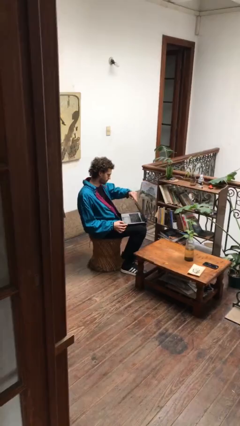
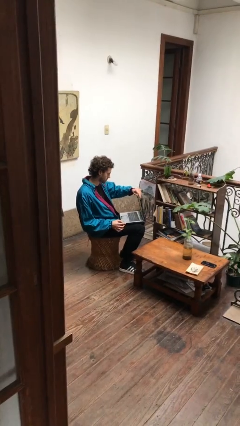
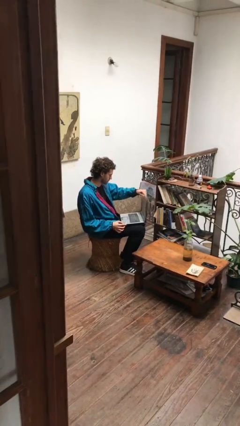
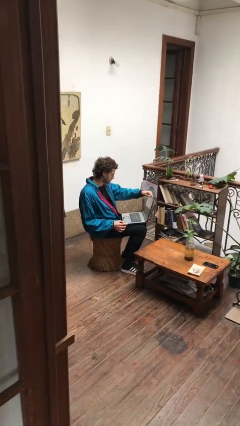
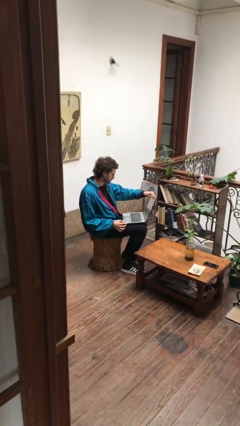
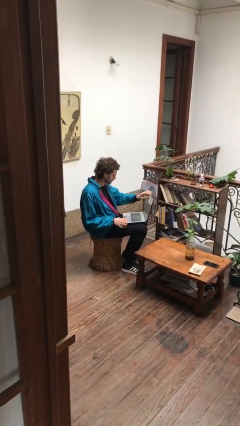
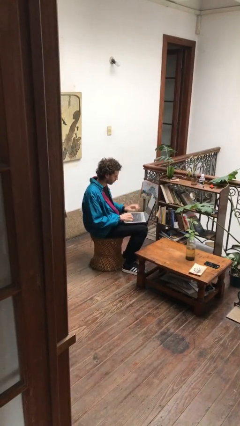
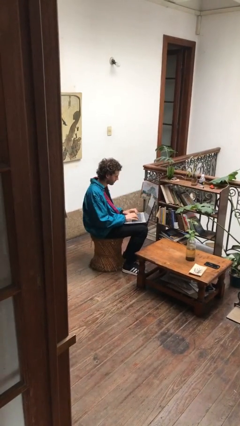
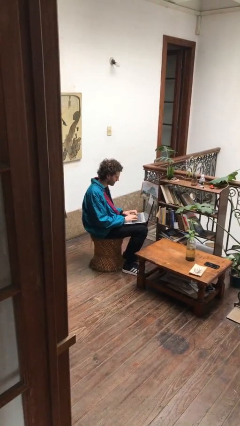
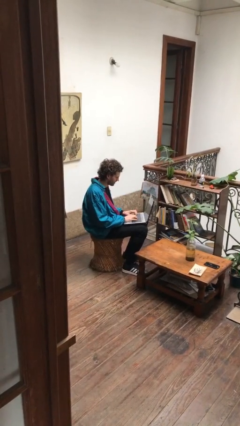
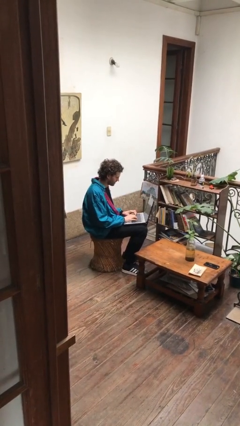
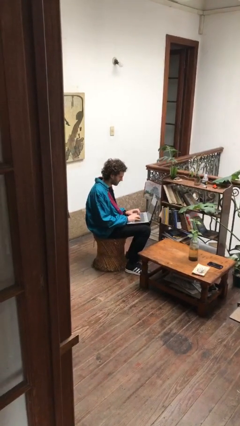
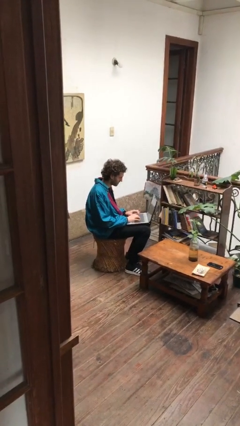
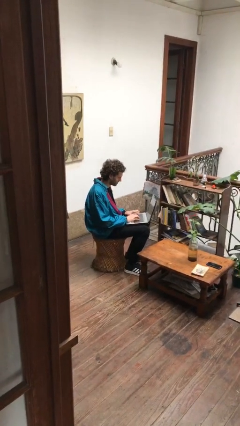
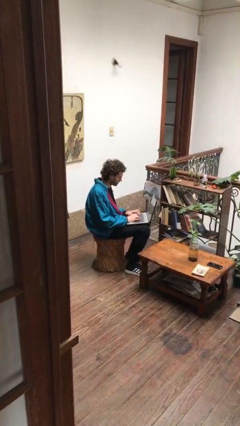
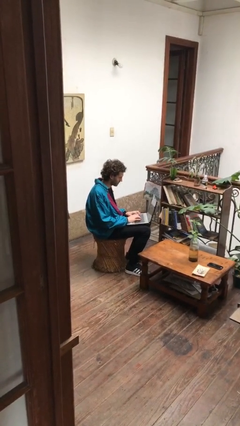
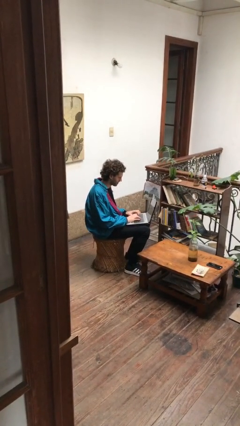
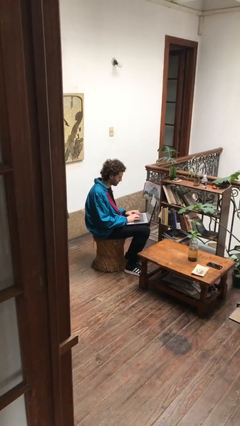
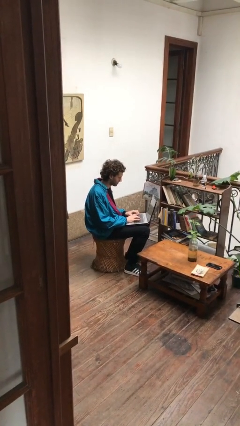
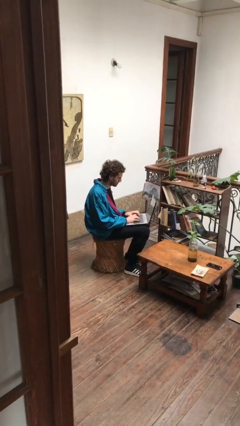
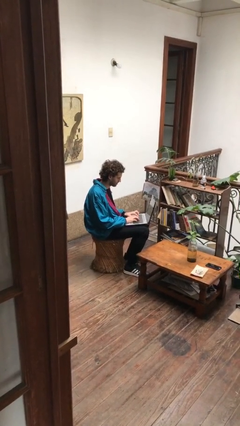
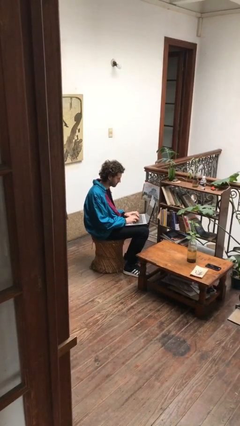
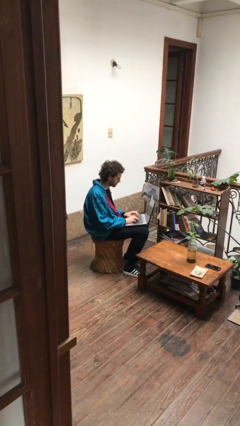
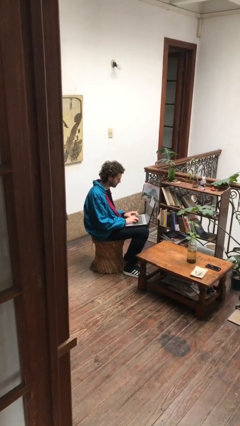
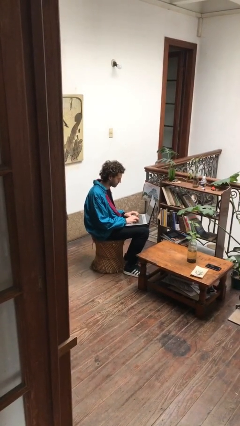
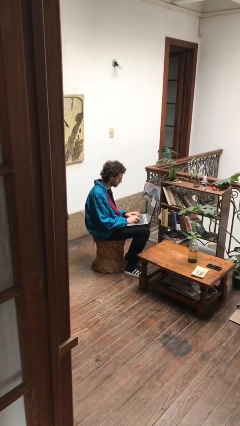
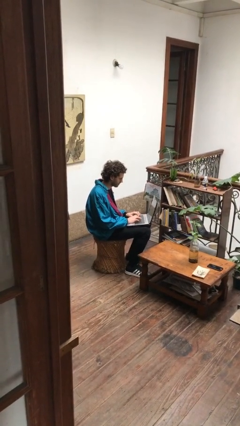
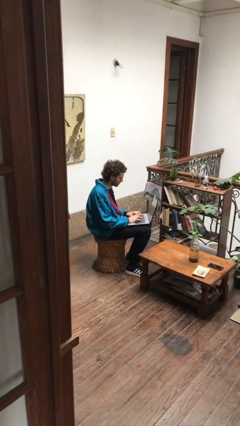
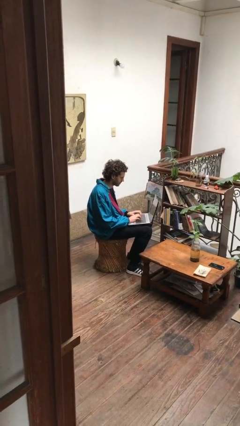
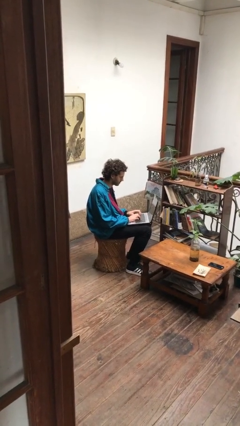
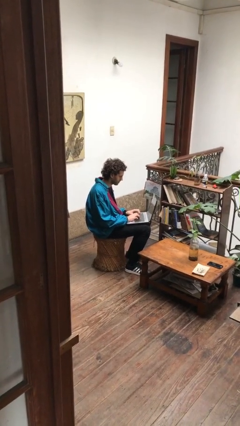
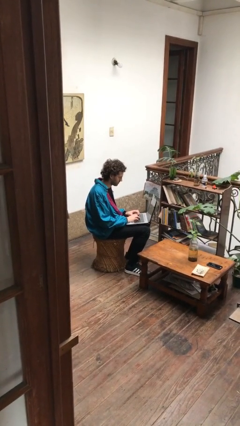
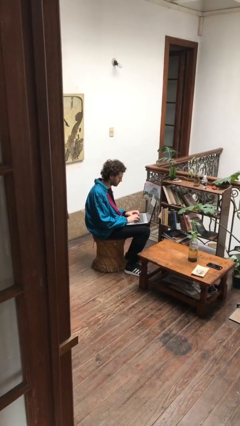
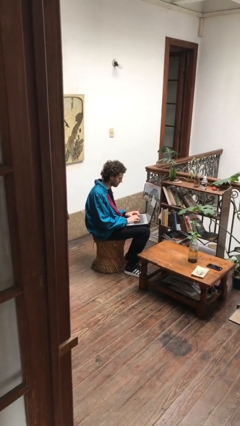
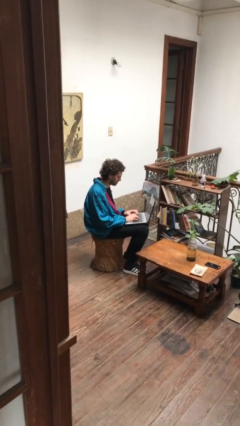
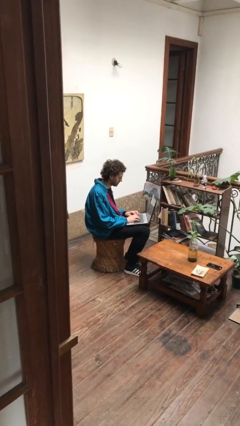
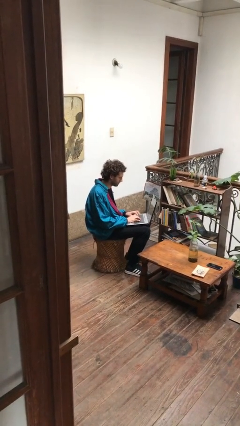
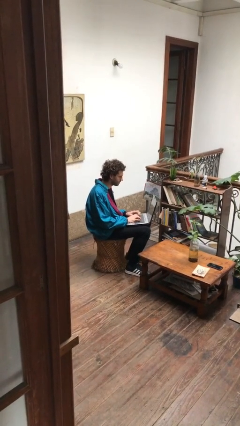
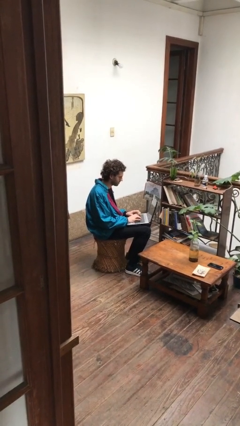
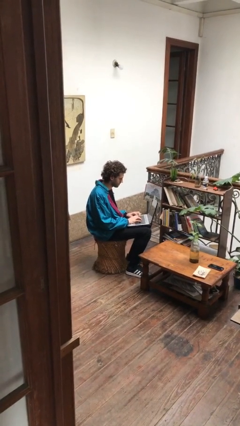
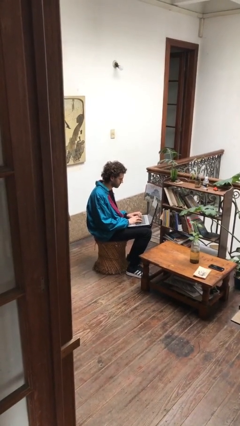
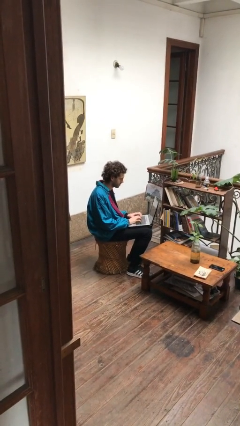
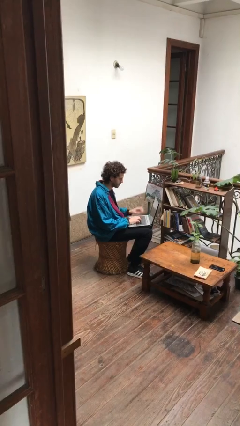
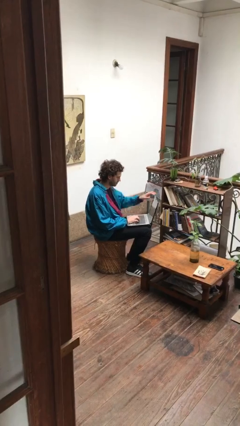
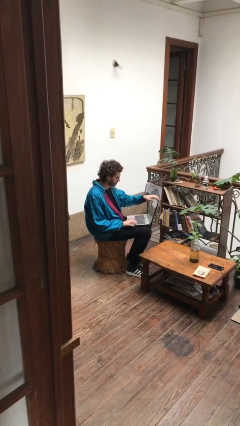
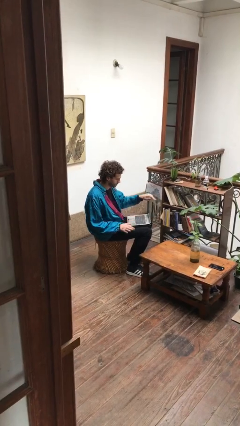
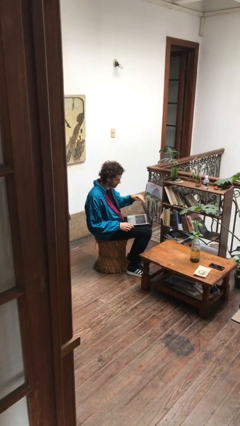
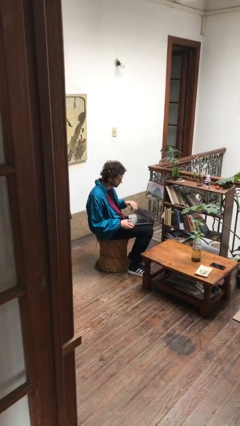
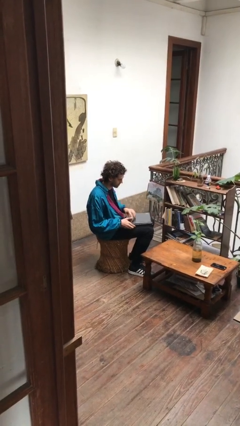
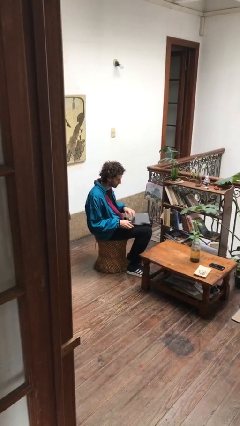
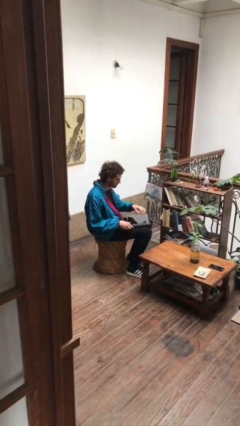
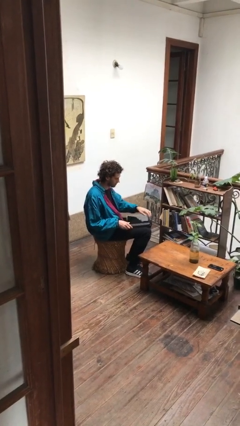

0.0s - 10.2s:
person interacts with laptop

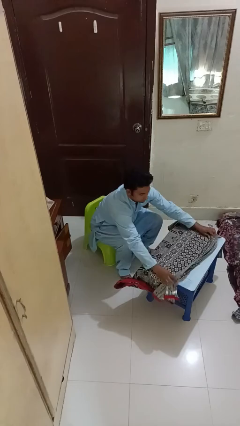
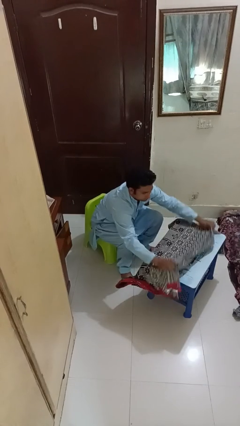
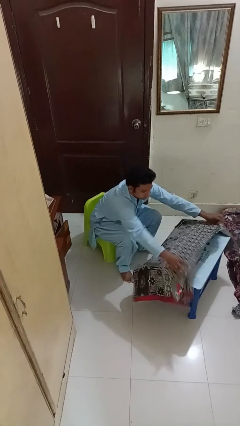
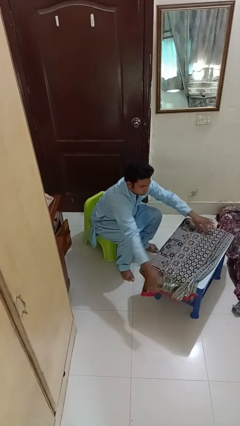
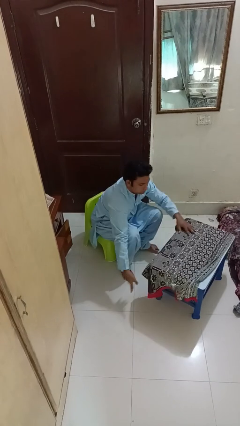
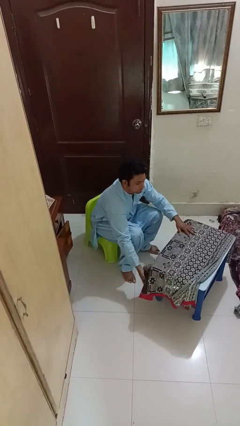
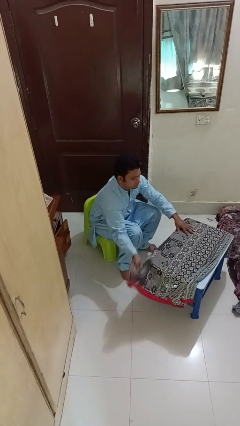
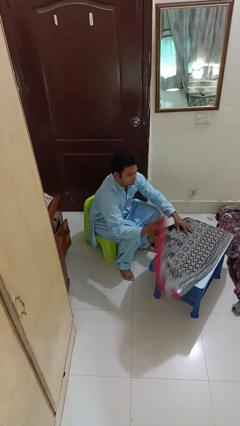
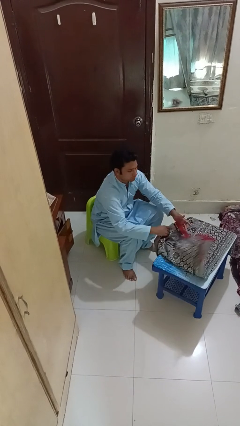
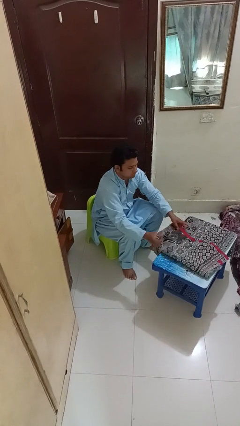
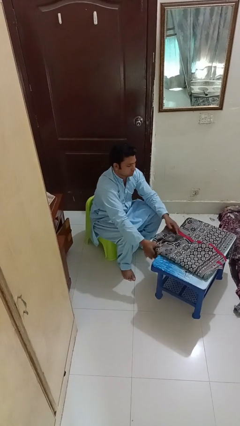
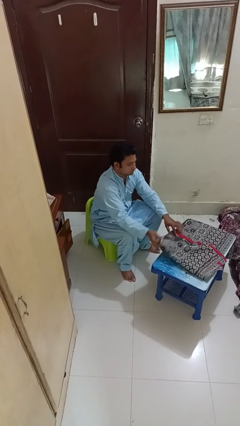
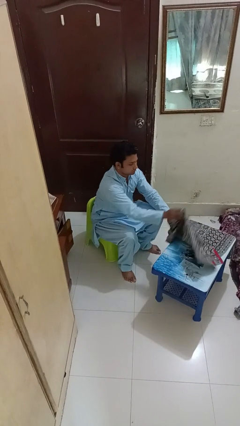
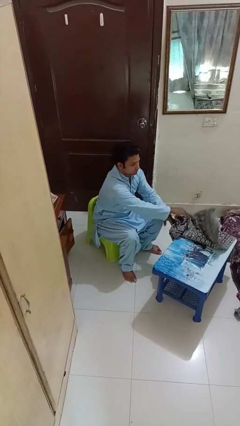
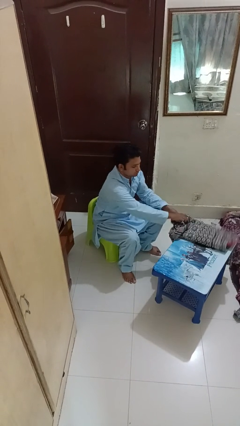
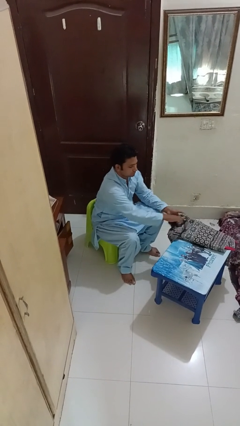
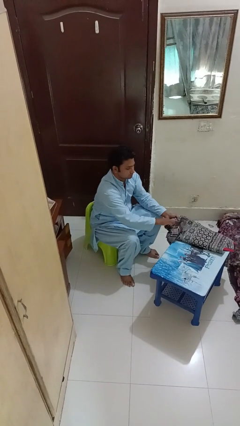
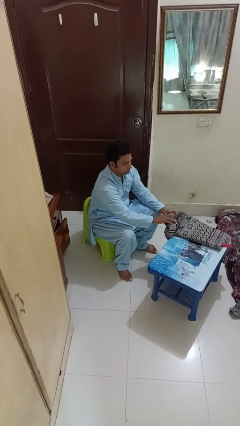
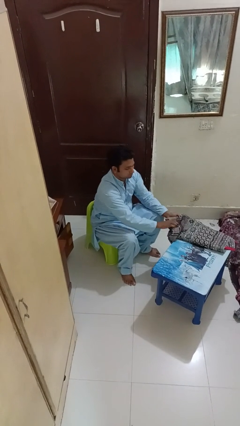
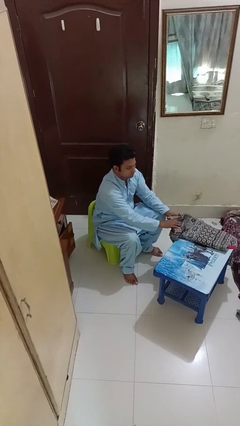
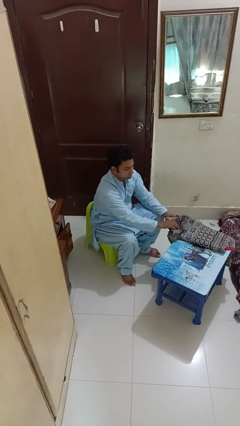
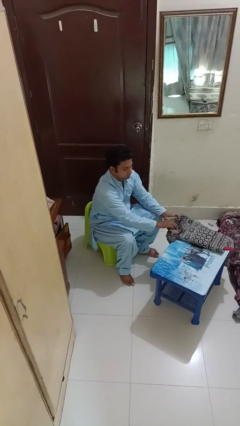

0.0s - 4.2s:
person folds blanket

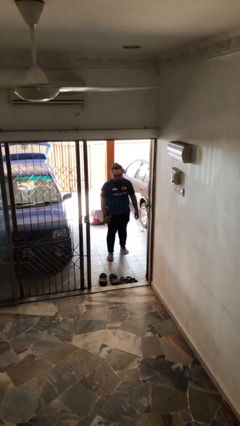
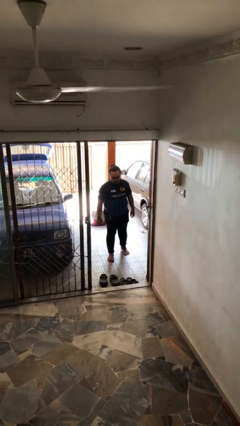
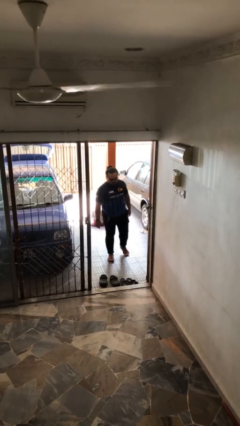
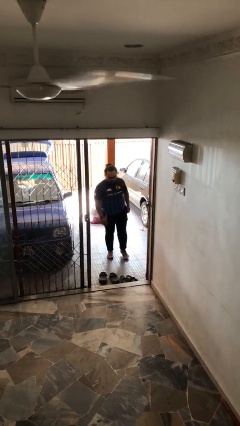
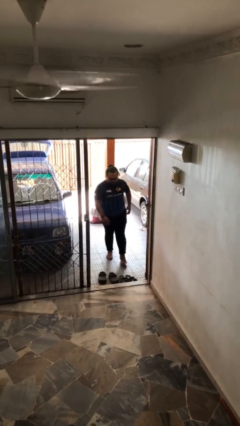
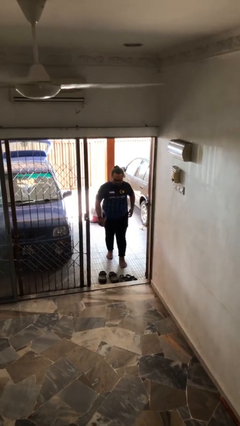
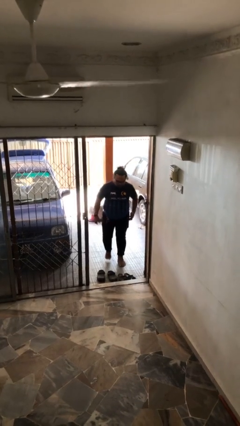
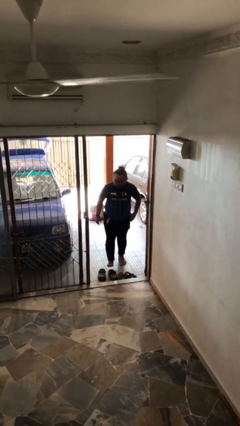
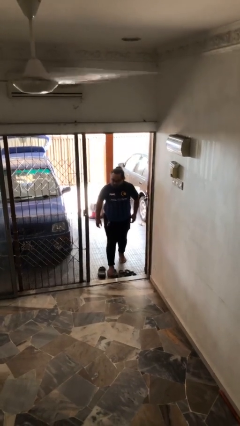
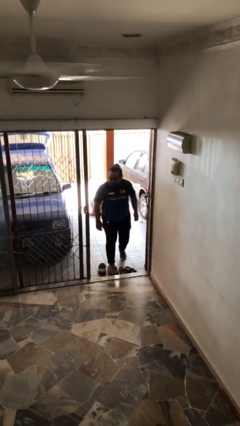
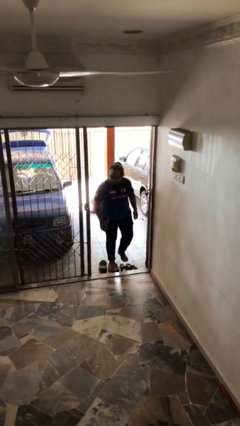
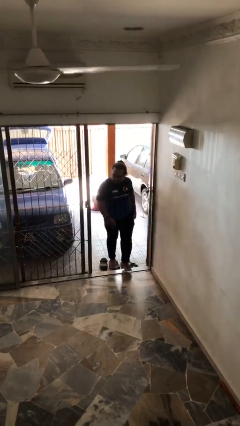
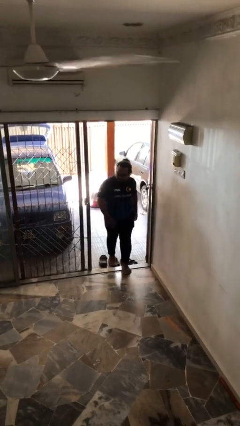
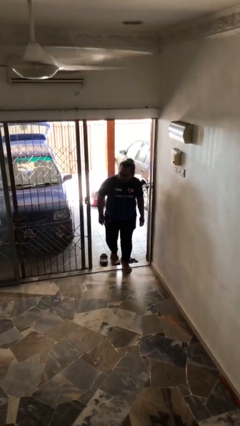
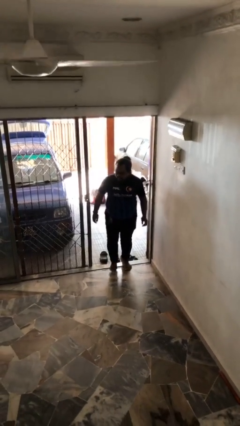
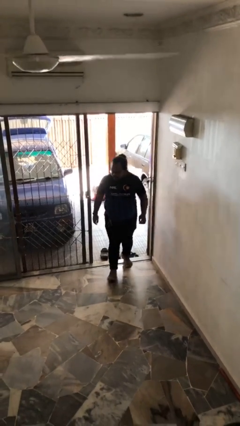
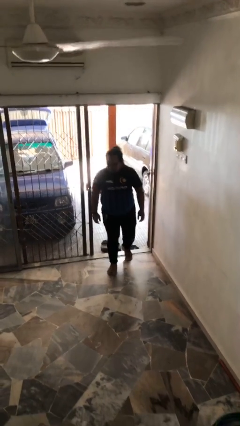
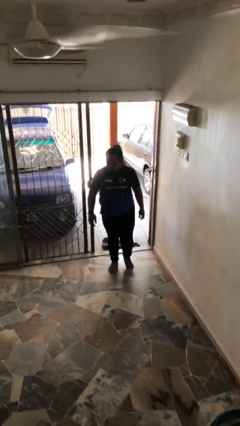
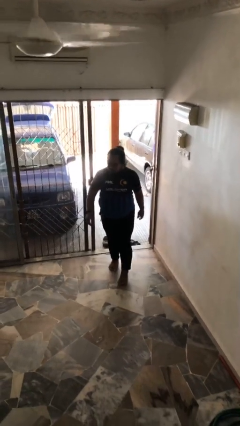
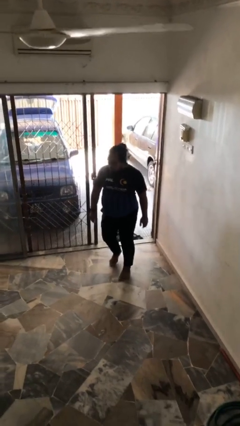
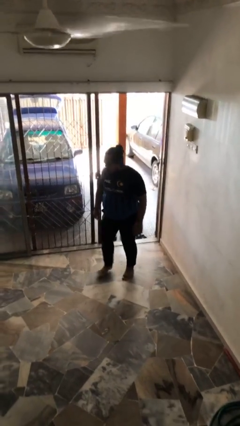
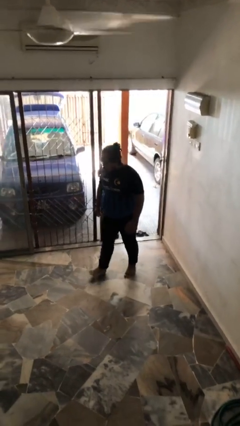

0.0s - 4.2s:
person enters scene through structure
